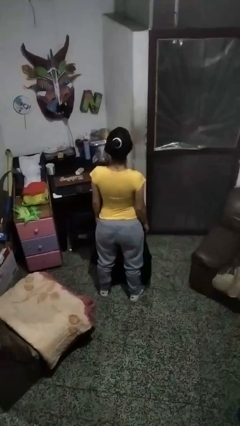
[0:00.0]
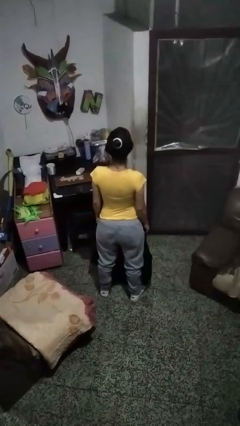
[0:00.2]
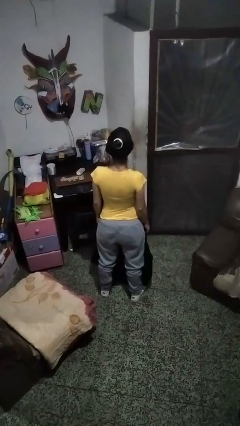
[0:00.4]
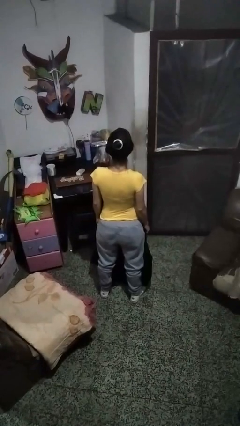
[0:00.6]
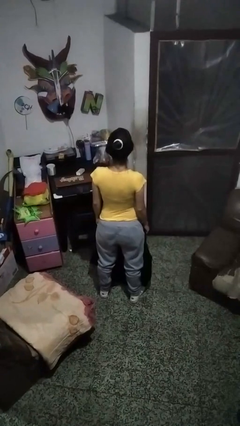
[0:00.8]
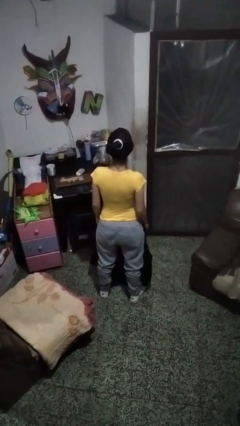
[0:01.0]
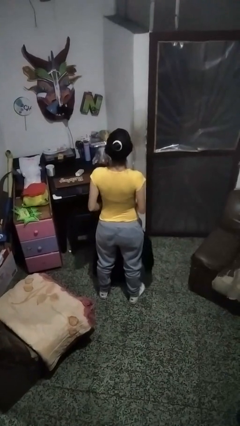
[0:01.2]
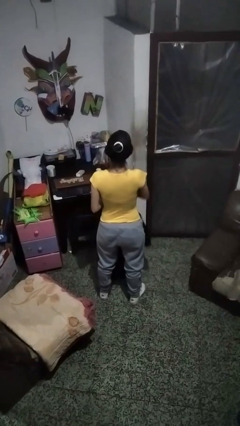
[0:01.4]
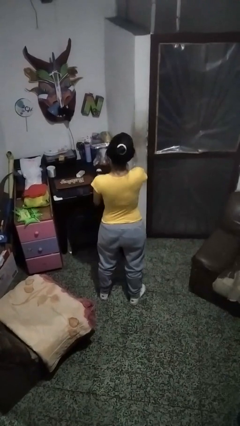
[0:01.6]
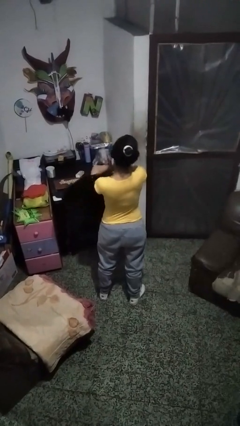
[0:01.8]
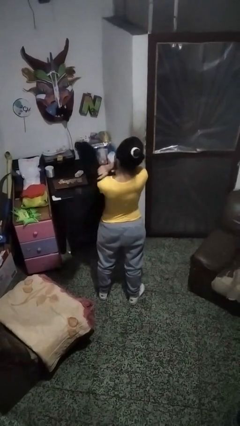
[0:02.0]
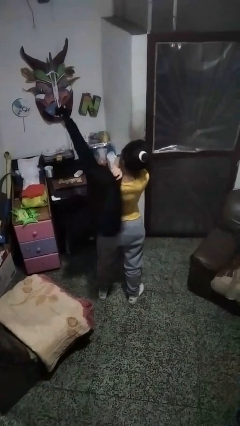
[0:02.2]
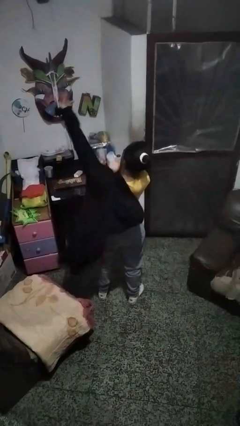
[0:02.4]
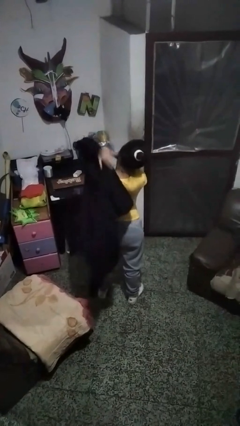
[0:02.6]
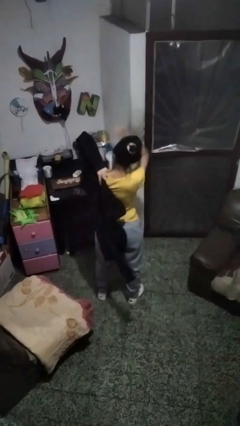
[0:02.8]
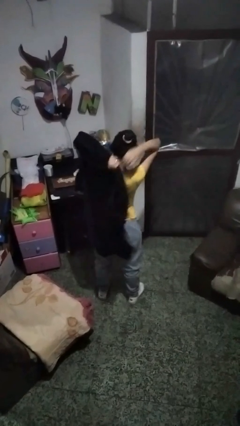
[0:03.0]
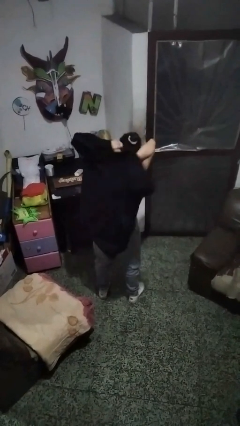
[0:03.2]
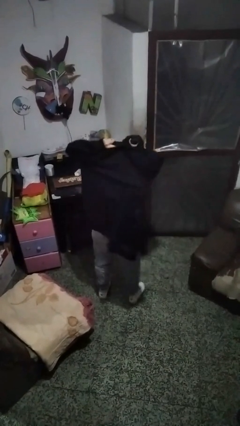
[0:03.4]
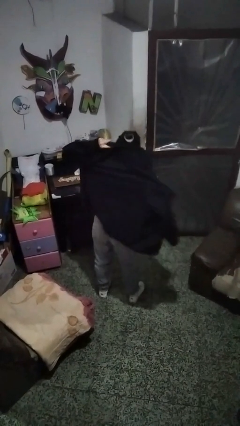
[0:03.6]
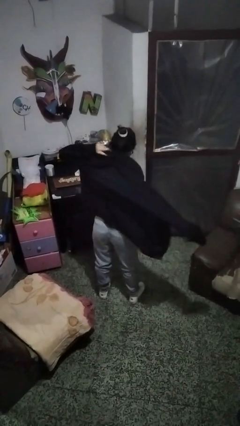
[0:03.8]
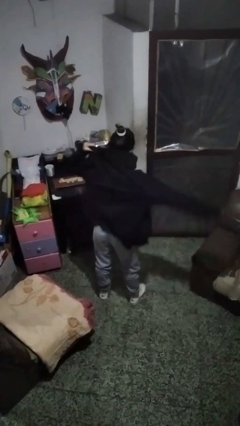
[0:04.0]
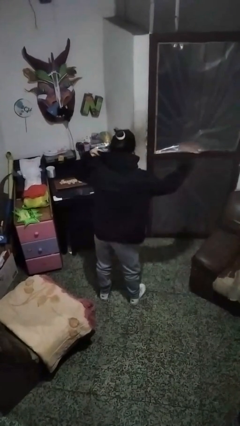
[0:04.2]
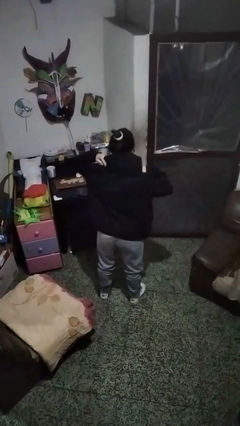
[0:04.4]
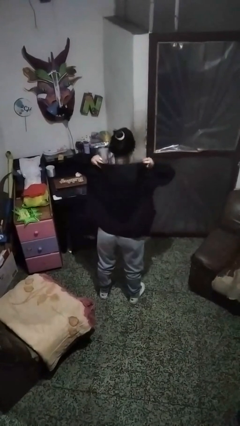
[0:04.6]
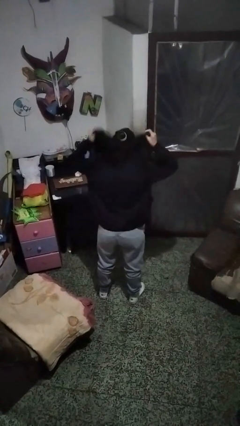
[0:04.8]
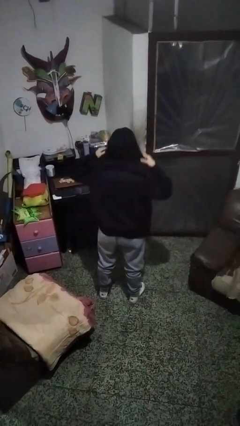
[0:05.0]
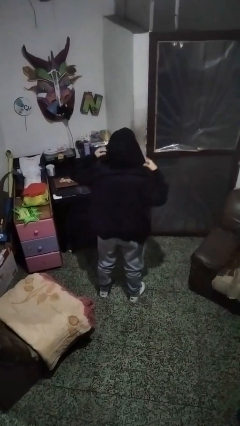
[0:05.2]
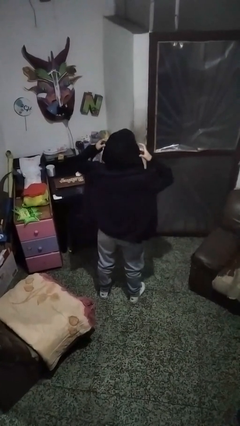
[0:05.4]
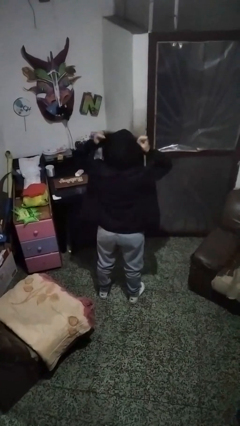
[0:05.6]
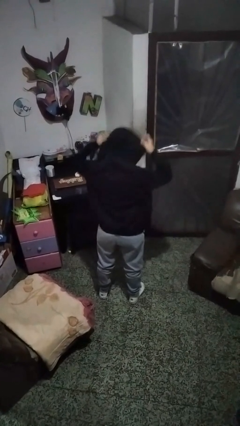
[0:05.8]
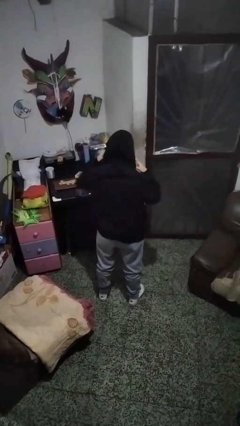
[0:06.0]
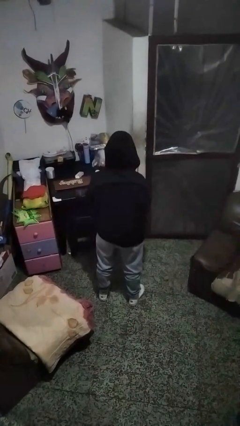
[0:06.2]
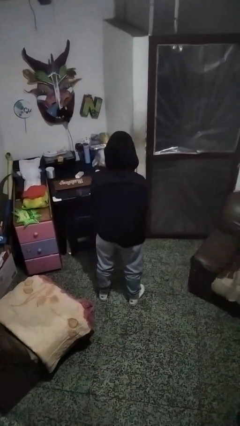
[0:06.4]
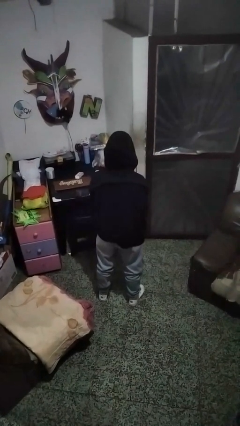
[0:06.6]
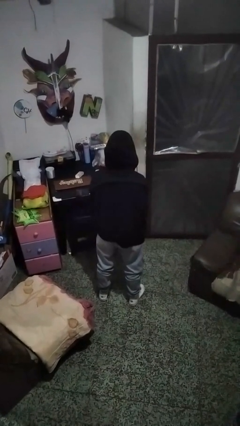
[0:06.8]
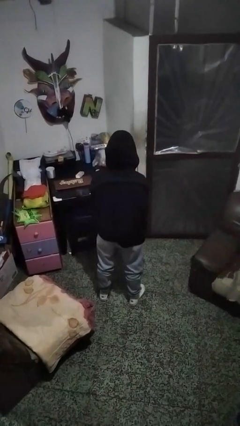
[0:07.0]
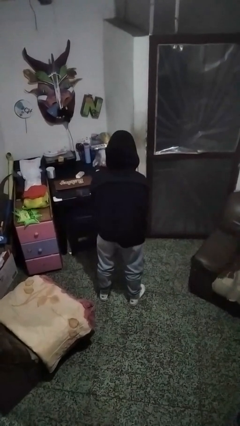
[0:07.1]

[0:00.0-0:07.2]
person puts on hoodie

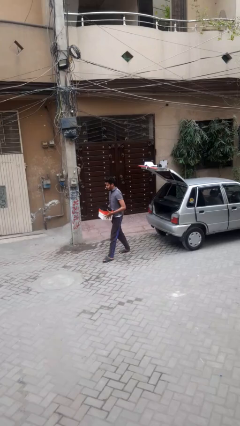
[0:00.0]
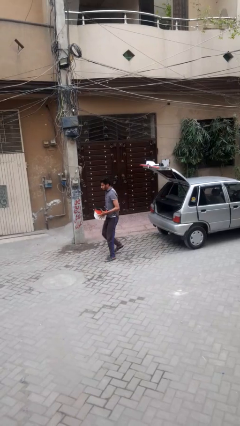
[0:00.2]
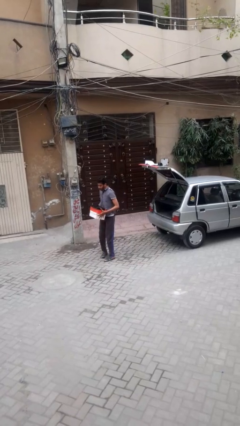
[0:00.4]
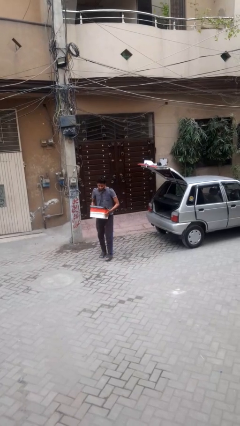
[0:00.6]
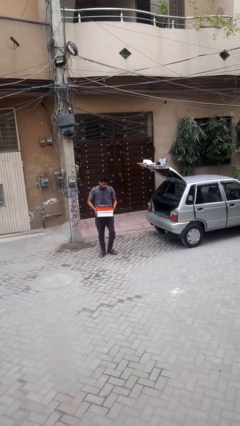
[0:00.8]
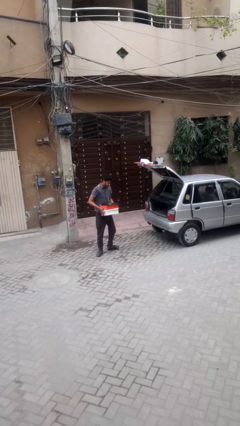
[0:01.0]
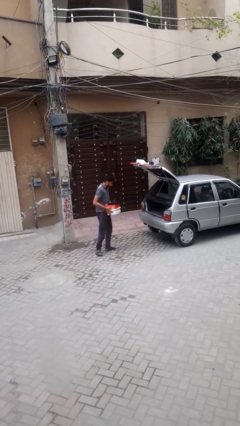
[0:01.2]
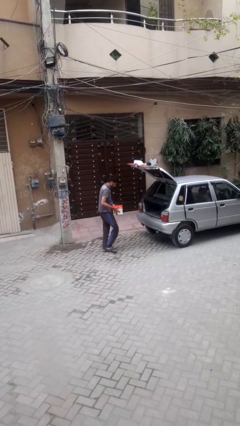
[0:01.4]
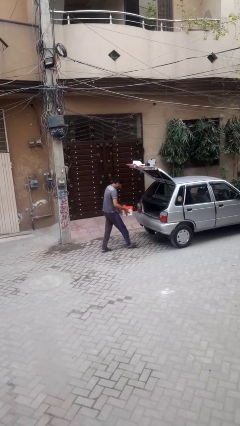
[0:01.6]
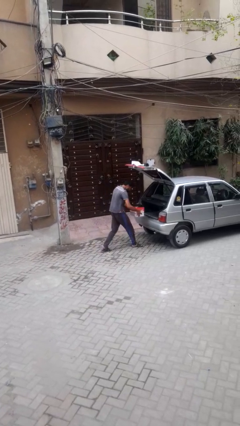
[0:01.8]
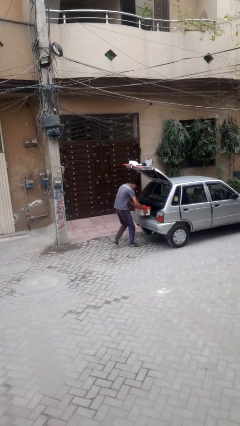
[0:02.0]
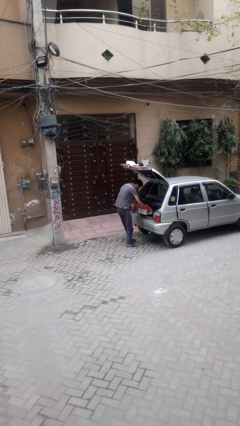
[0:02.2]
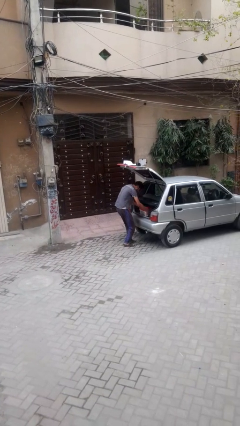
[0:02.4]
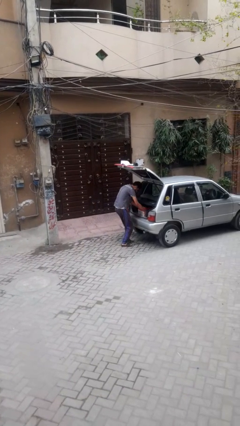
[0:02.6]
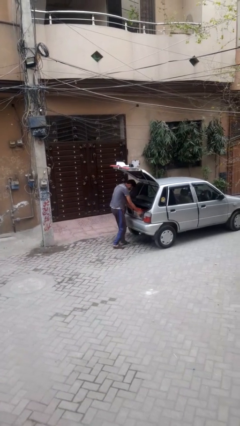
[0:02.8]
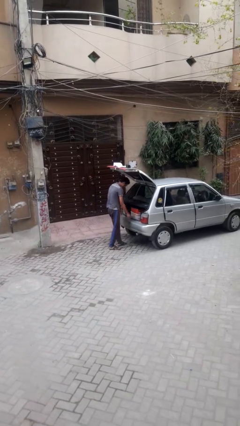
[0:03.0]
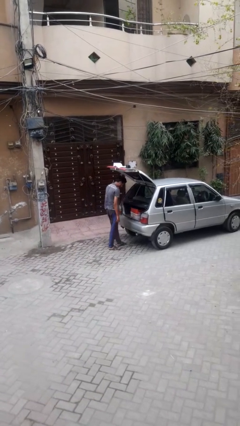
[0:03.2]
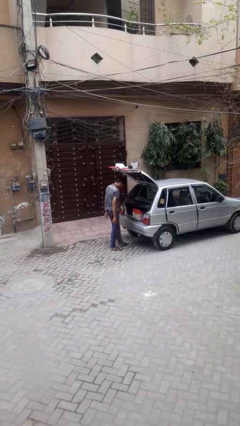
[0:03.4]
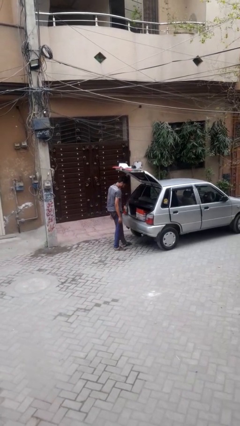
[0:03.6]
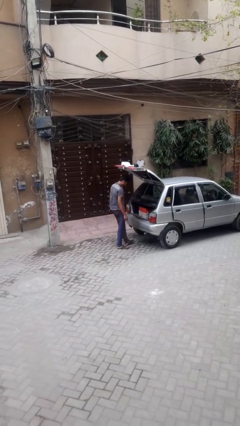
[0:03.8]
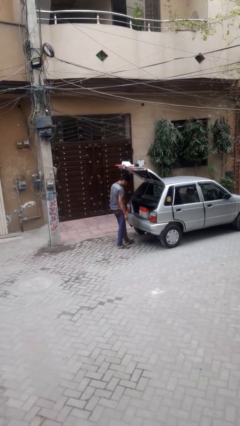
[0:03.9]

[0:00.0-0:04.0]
person loads car

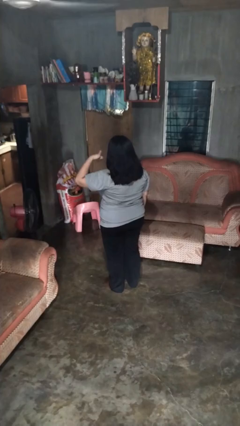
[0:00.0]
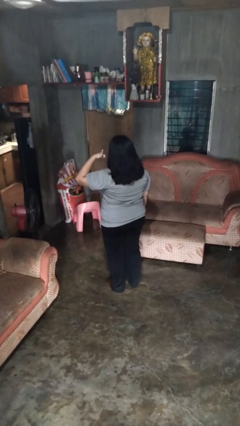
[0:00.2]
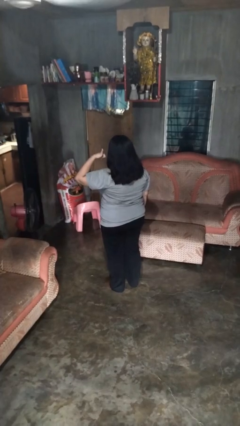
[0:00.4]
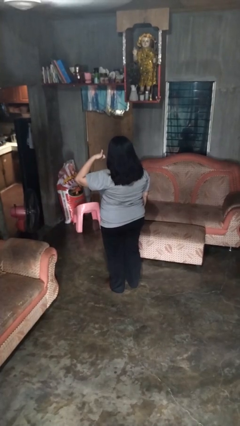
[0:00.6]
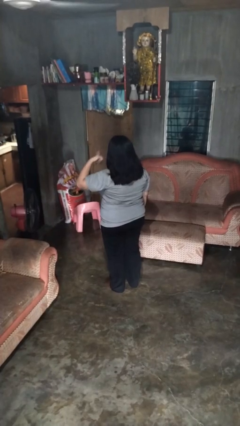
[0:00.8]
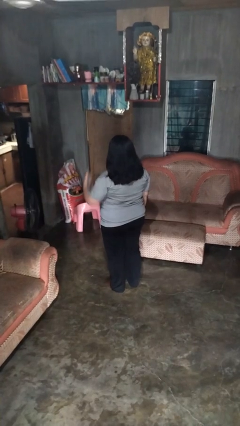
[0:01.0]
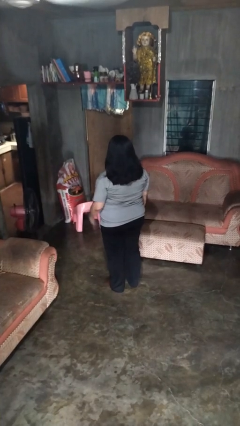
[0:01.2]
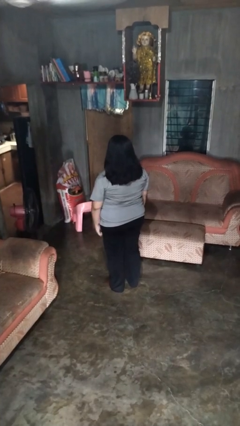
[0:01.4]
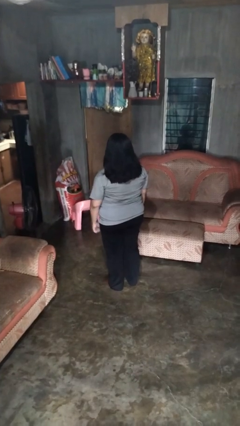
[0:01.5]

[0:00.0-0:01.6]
person gestures call me

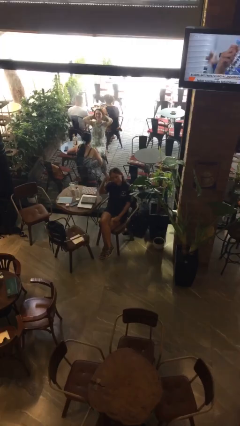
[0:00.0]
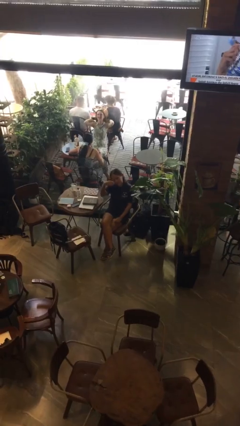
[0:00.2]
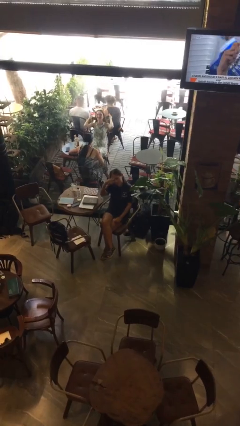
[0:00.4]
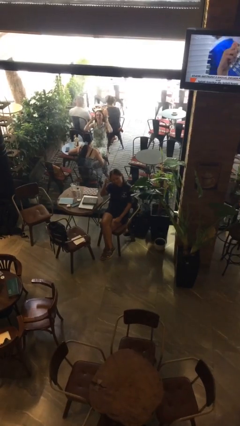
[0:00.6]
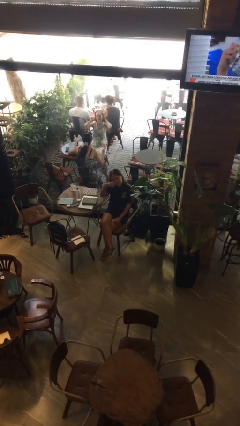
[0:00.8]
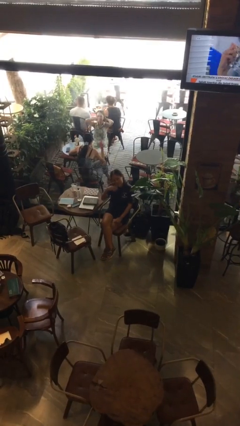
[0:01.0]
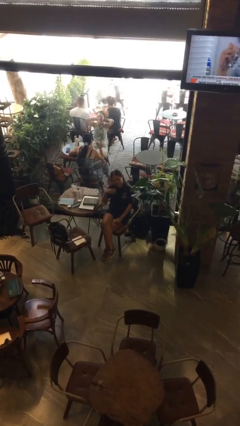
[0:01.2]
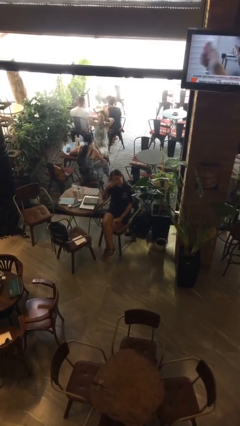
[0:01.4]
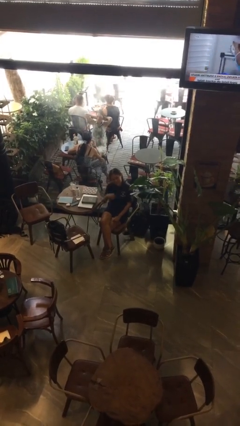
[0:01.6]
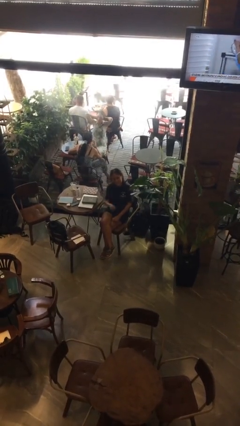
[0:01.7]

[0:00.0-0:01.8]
person gestures come here

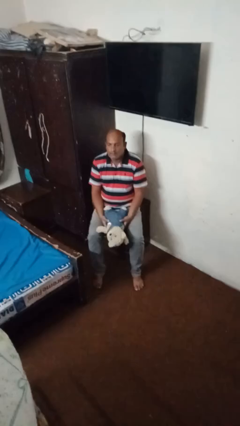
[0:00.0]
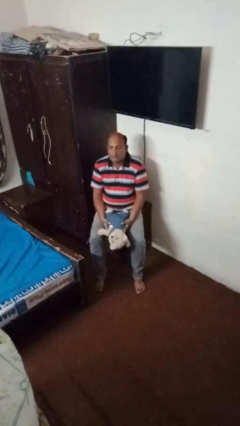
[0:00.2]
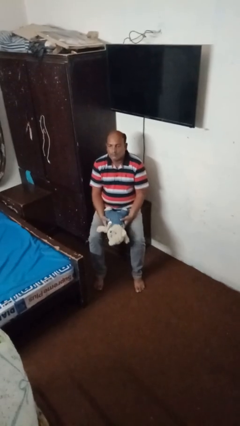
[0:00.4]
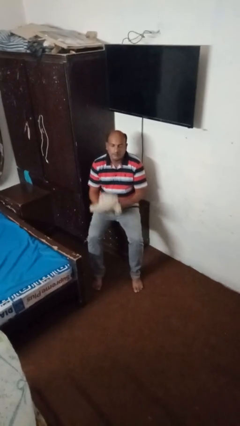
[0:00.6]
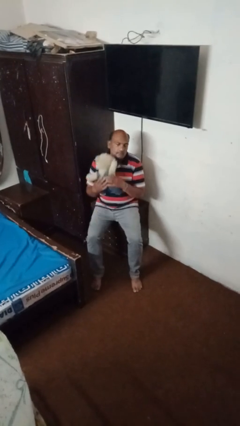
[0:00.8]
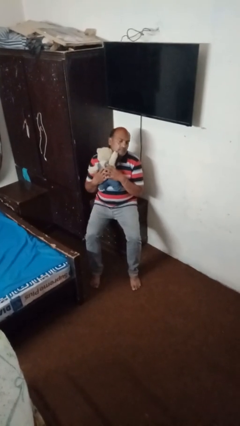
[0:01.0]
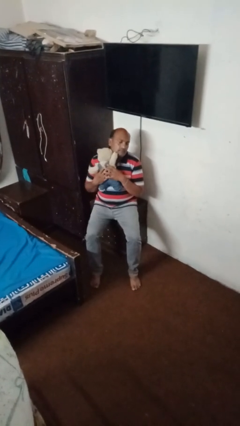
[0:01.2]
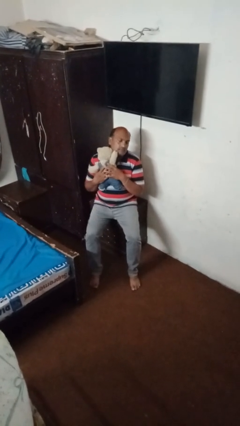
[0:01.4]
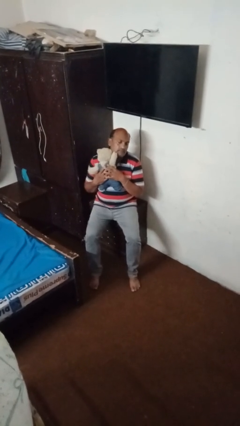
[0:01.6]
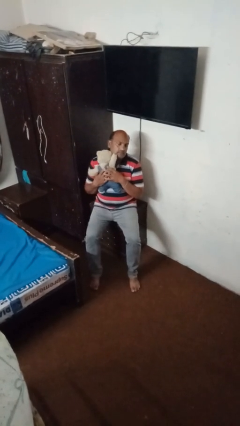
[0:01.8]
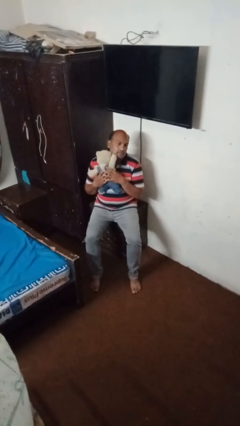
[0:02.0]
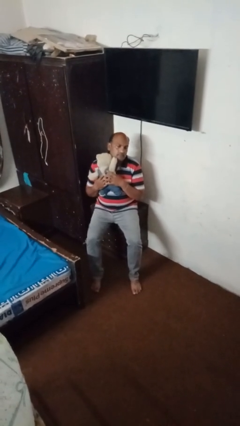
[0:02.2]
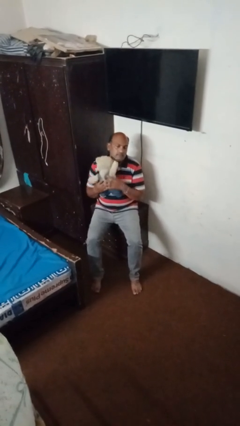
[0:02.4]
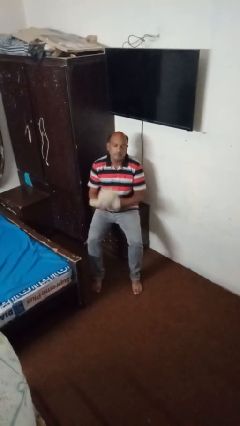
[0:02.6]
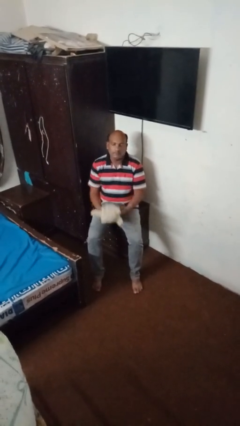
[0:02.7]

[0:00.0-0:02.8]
person hugs stuffed animal

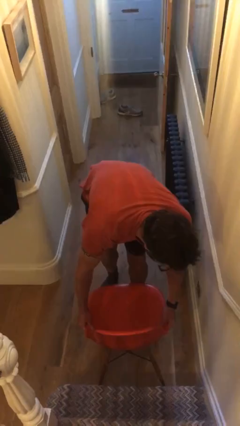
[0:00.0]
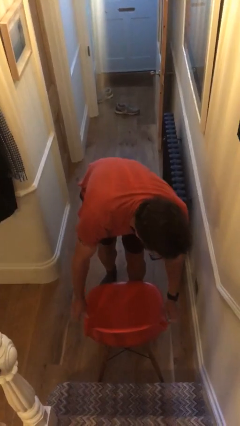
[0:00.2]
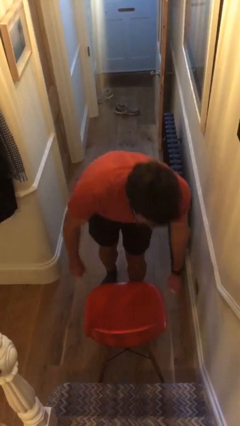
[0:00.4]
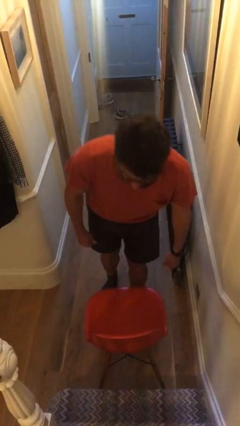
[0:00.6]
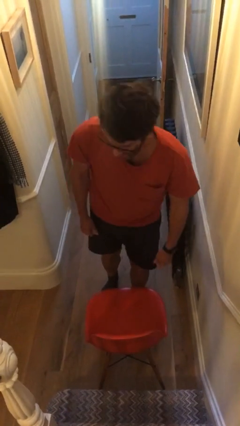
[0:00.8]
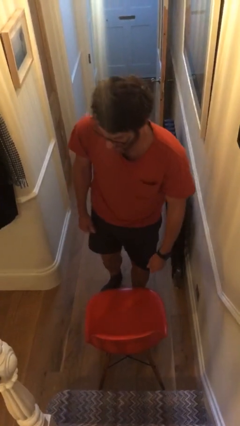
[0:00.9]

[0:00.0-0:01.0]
person puts down object on floor
